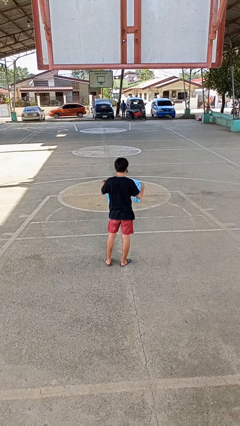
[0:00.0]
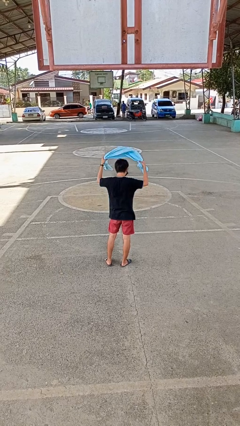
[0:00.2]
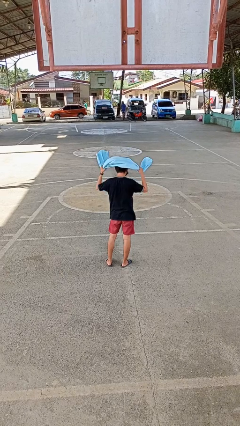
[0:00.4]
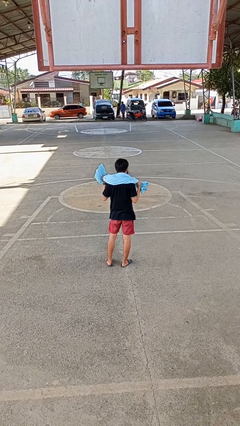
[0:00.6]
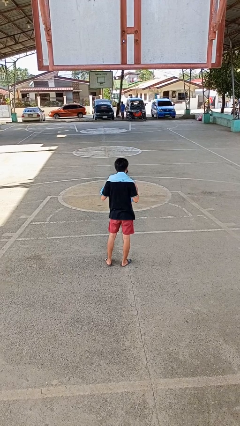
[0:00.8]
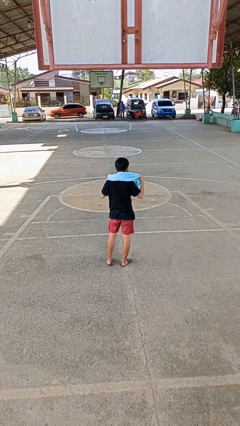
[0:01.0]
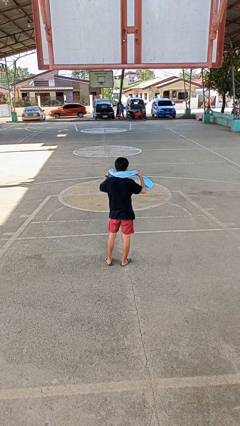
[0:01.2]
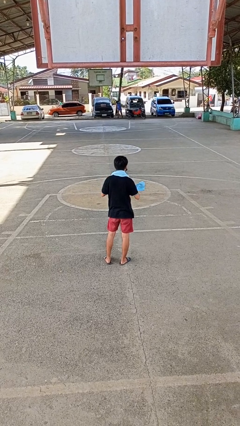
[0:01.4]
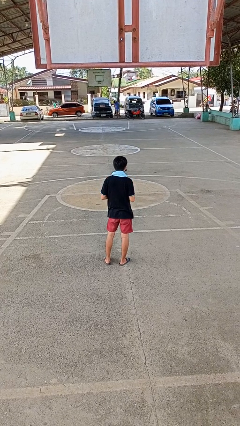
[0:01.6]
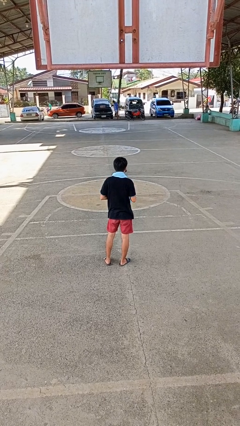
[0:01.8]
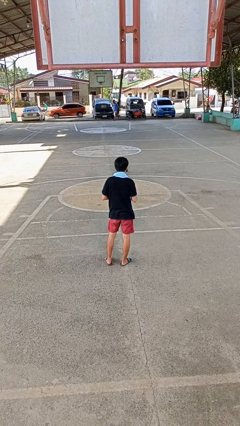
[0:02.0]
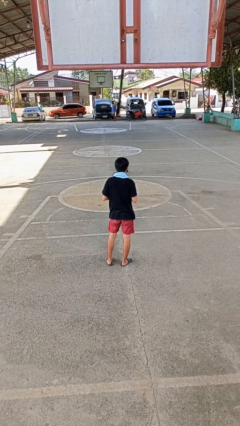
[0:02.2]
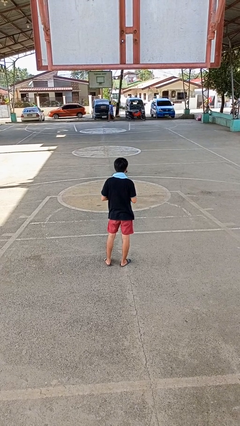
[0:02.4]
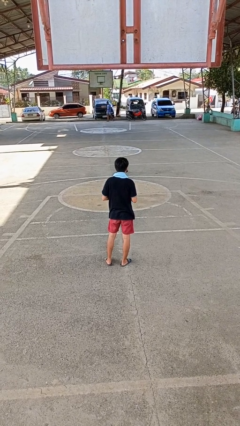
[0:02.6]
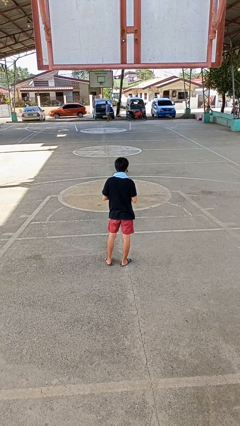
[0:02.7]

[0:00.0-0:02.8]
person puts on scarf

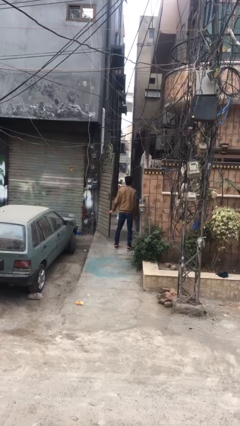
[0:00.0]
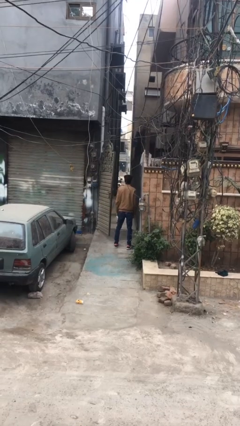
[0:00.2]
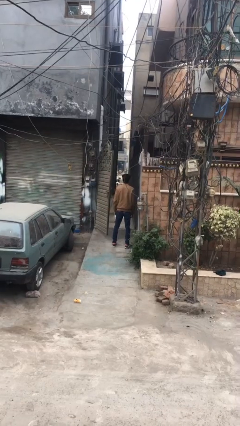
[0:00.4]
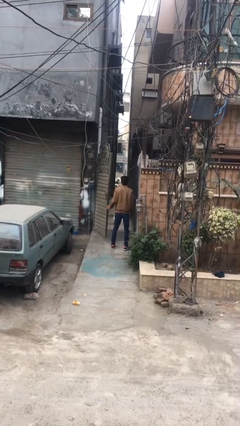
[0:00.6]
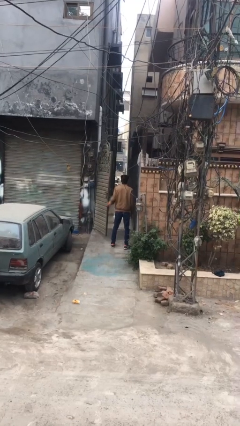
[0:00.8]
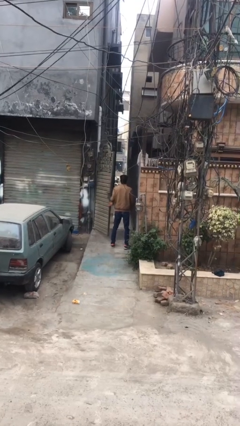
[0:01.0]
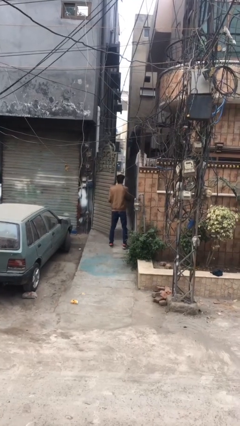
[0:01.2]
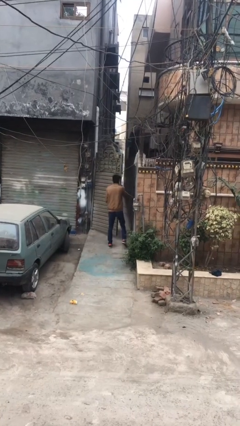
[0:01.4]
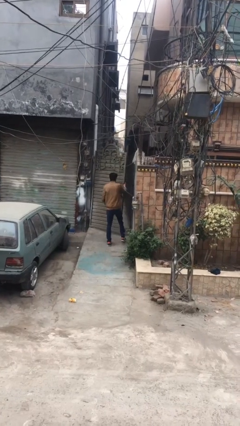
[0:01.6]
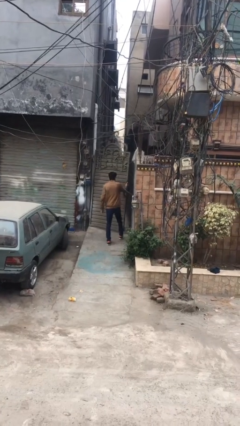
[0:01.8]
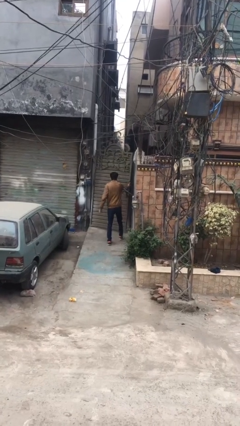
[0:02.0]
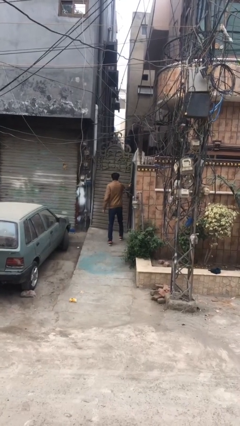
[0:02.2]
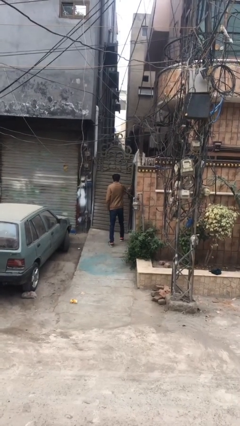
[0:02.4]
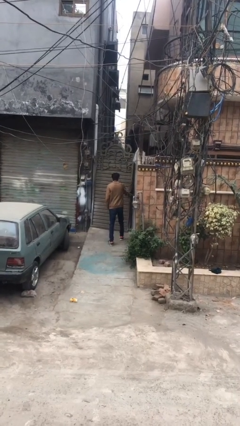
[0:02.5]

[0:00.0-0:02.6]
person closes facility door

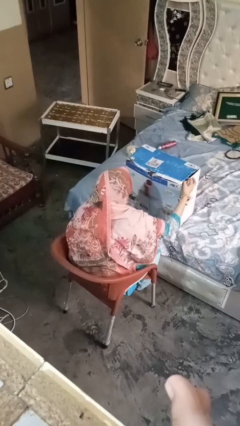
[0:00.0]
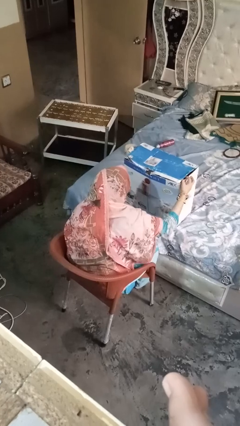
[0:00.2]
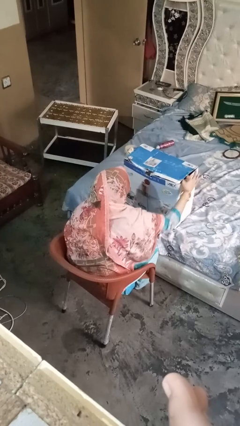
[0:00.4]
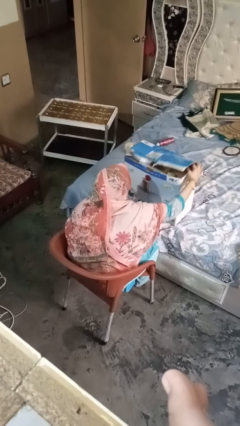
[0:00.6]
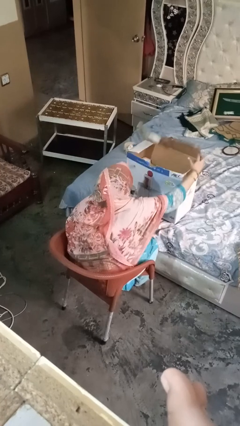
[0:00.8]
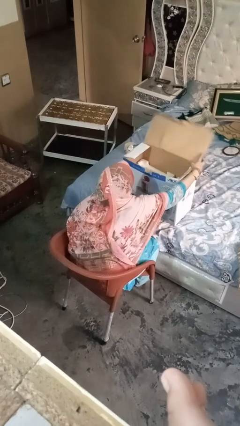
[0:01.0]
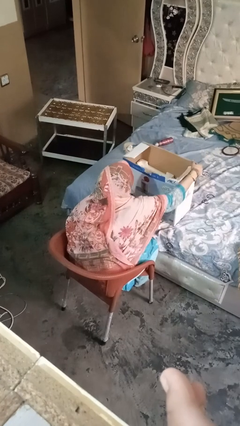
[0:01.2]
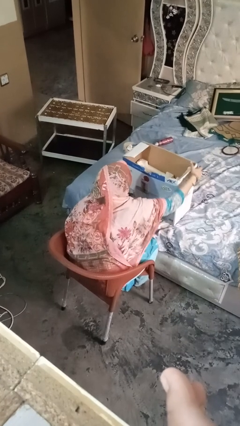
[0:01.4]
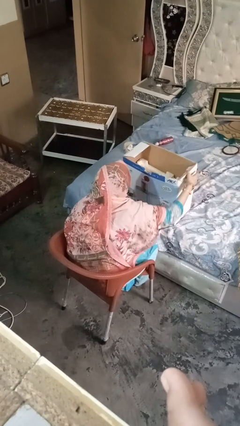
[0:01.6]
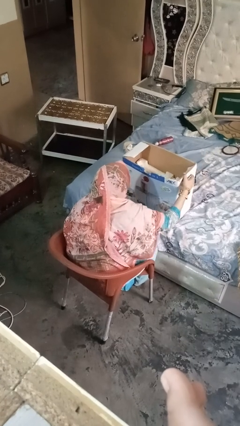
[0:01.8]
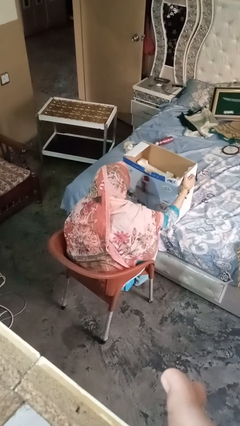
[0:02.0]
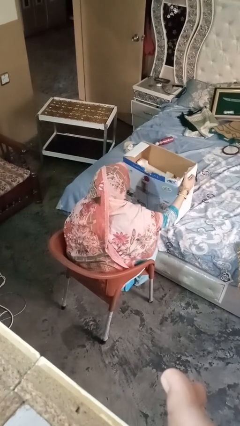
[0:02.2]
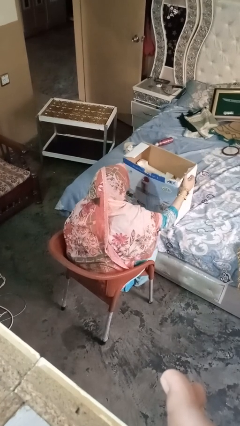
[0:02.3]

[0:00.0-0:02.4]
person opens box

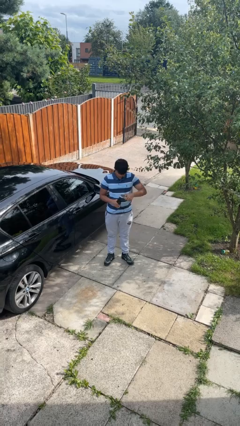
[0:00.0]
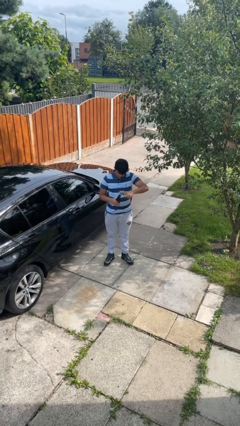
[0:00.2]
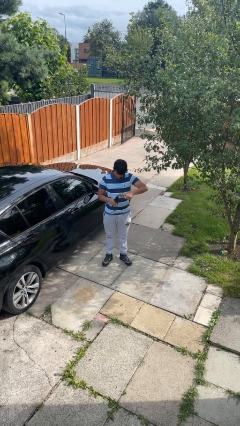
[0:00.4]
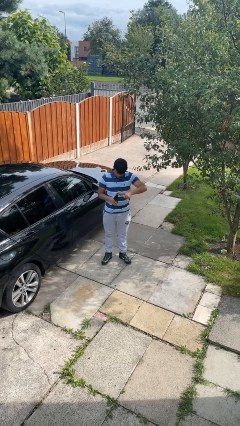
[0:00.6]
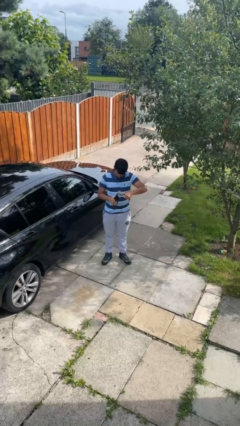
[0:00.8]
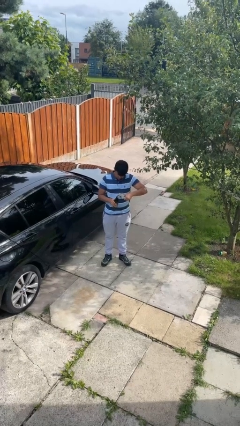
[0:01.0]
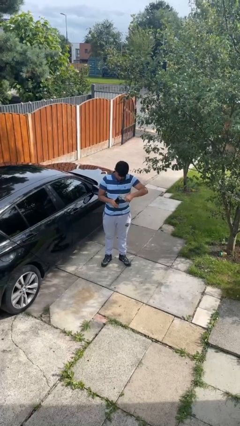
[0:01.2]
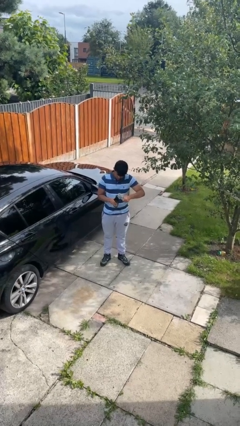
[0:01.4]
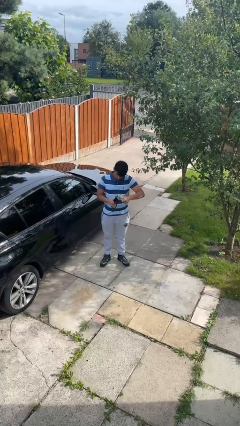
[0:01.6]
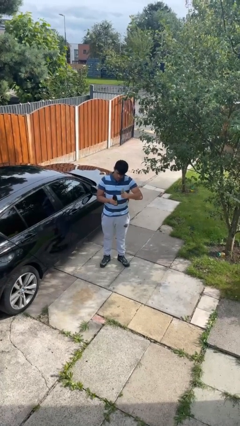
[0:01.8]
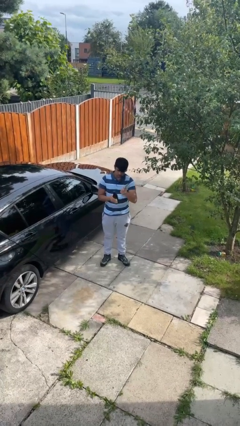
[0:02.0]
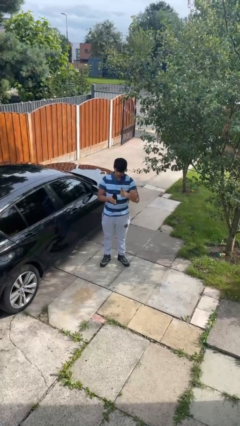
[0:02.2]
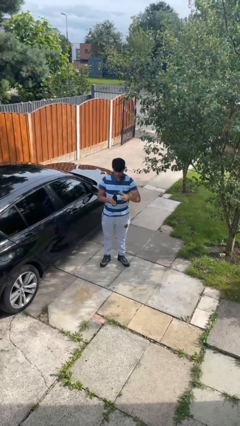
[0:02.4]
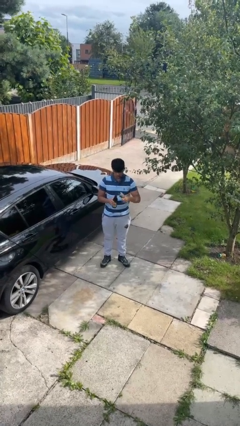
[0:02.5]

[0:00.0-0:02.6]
person opens can with can opener

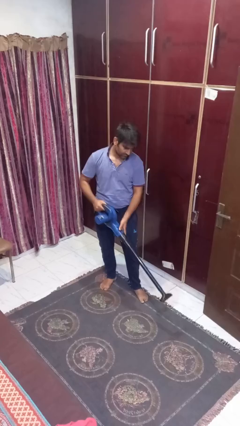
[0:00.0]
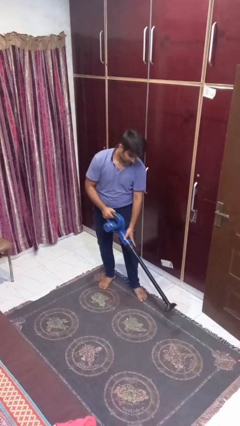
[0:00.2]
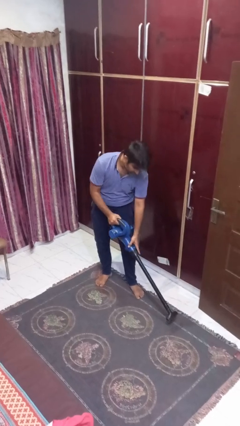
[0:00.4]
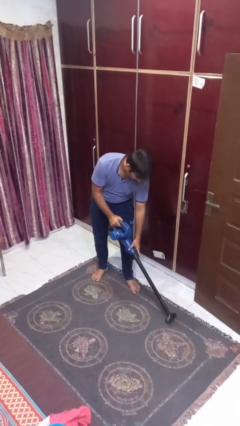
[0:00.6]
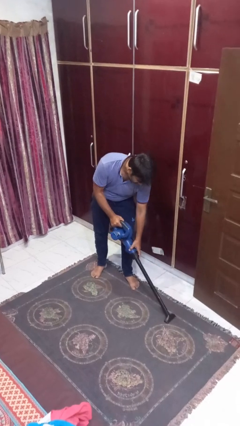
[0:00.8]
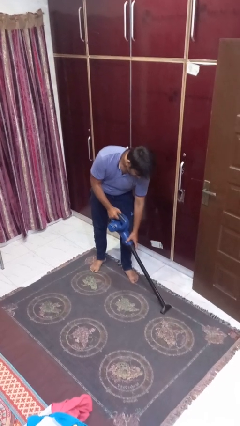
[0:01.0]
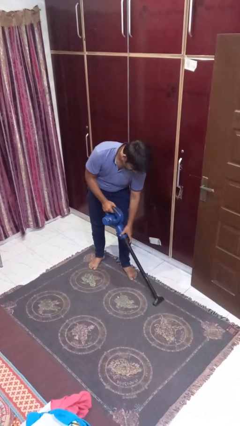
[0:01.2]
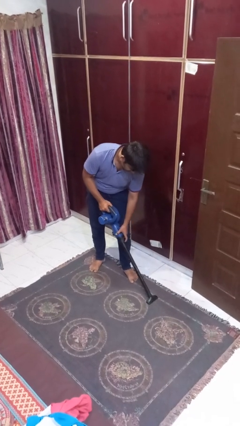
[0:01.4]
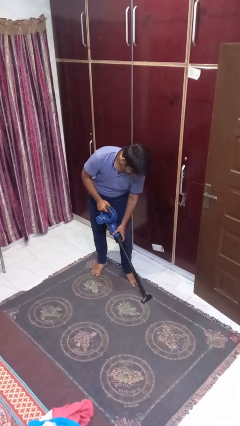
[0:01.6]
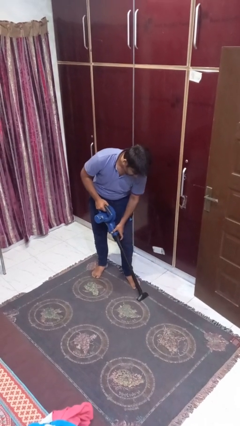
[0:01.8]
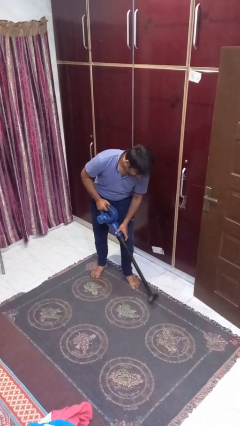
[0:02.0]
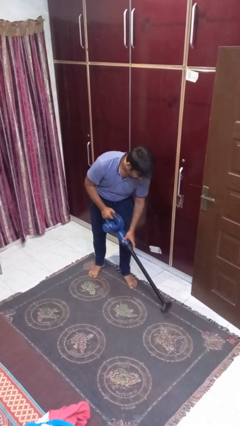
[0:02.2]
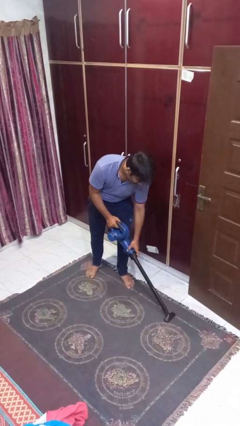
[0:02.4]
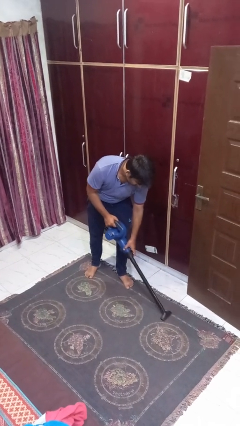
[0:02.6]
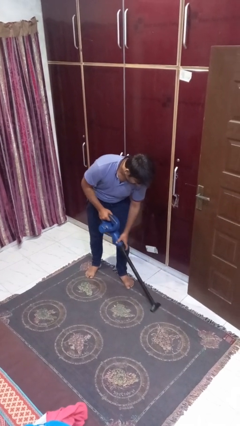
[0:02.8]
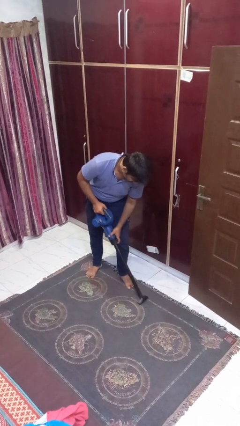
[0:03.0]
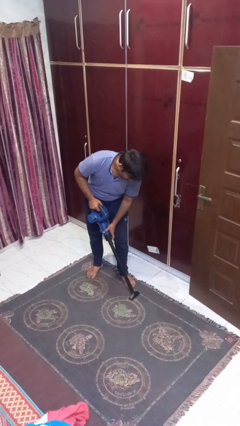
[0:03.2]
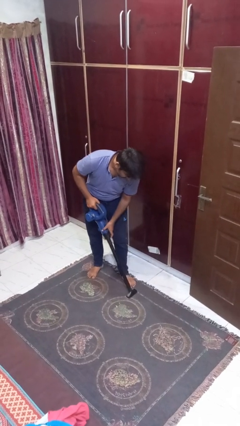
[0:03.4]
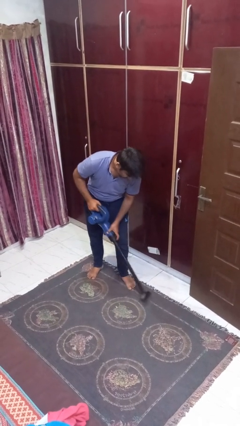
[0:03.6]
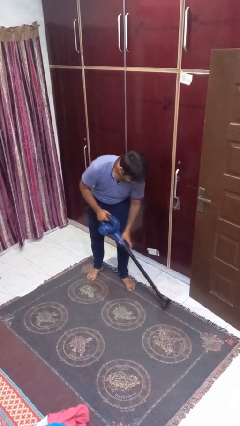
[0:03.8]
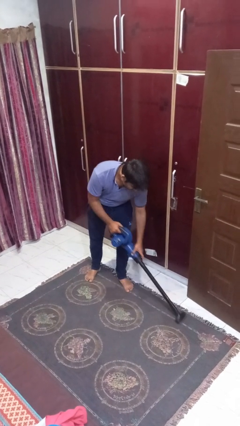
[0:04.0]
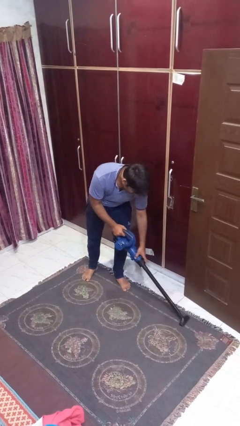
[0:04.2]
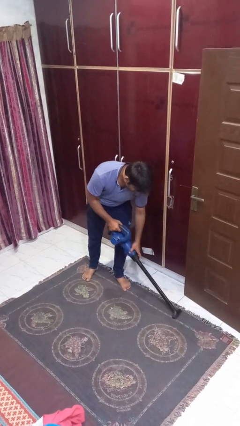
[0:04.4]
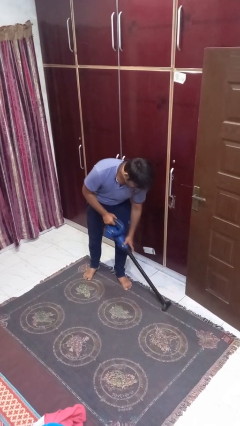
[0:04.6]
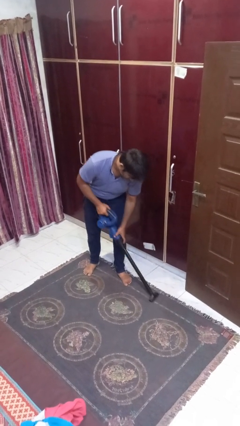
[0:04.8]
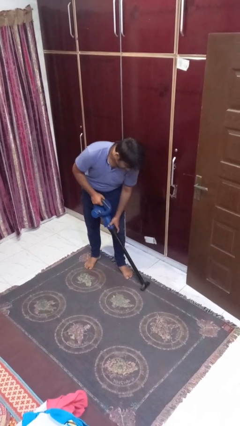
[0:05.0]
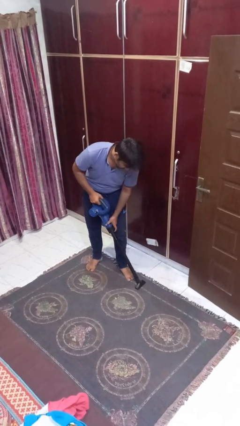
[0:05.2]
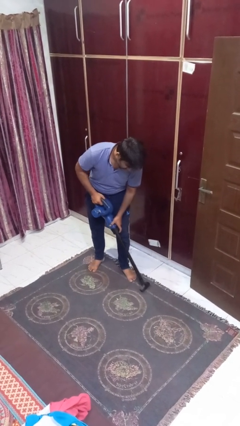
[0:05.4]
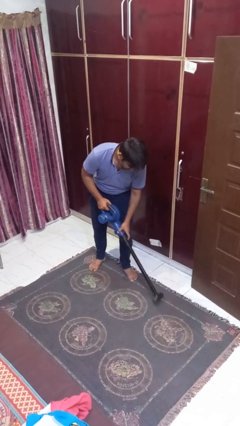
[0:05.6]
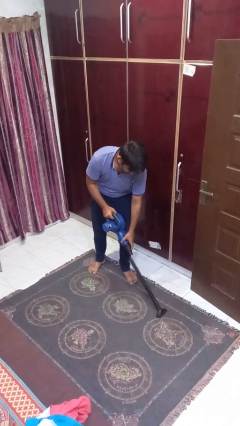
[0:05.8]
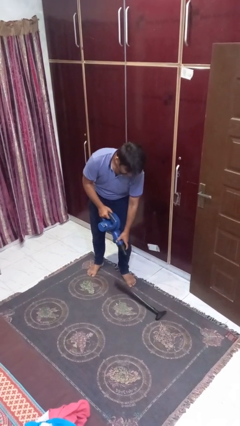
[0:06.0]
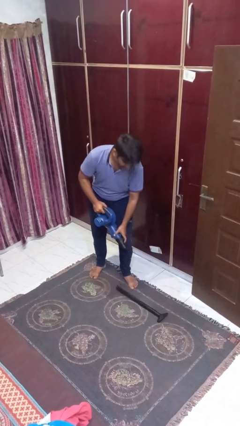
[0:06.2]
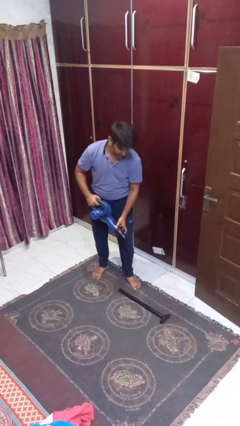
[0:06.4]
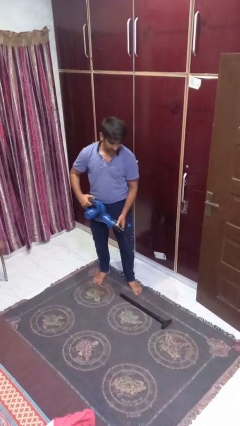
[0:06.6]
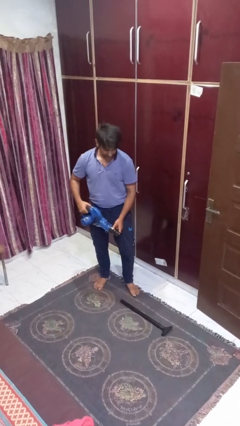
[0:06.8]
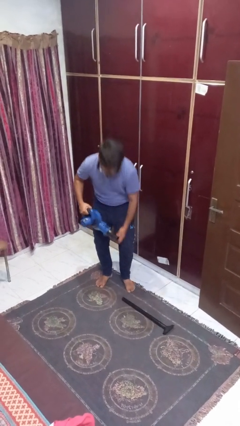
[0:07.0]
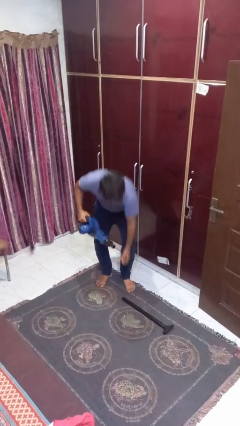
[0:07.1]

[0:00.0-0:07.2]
person vacuums carpet

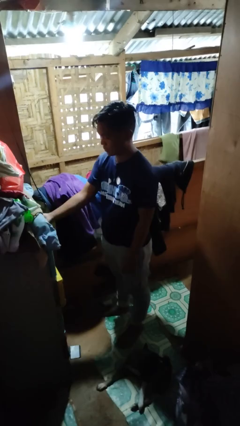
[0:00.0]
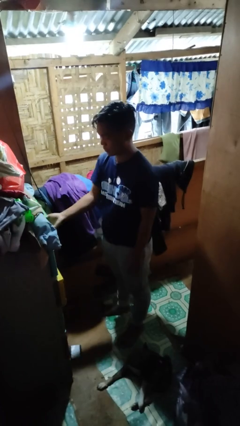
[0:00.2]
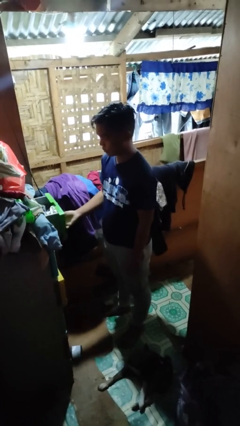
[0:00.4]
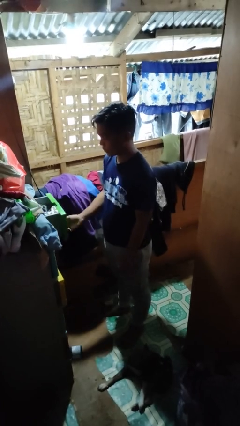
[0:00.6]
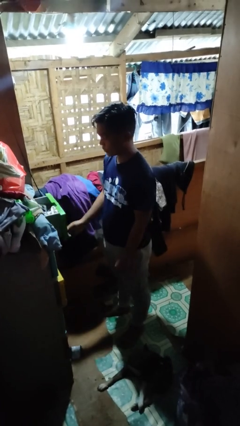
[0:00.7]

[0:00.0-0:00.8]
person opens dresser drawer
